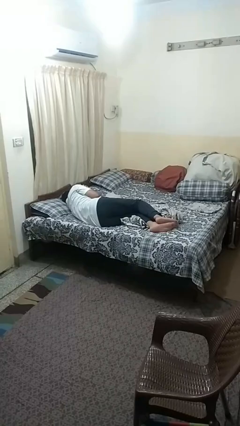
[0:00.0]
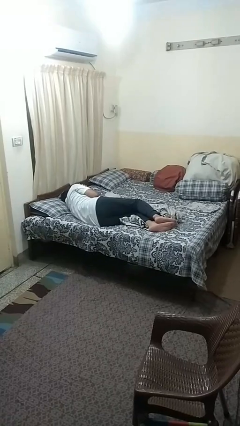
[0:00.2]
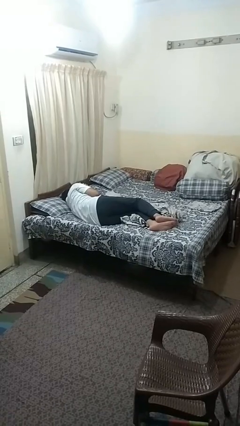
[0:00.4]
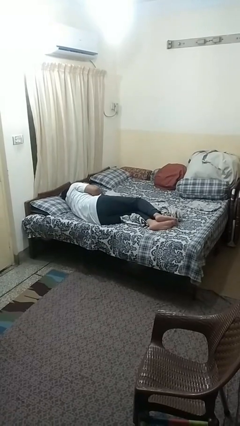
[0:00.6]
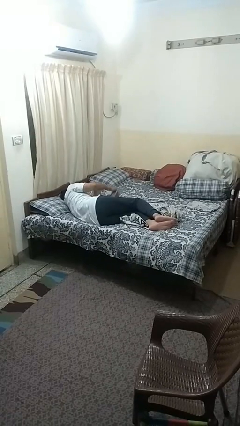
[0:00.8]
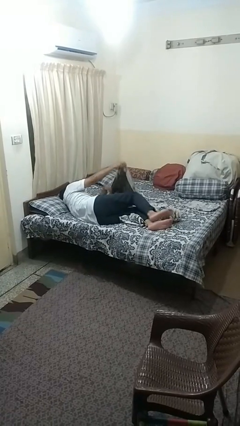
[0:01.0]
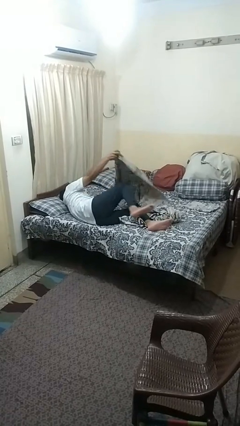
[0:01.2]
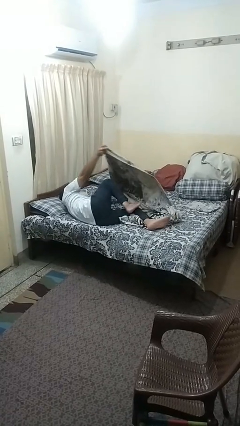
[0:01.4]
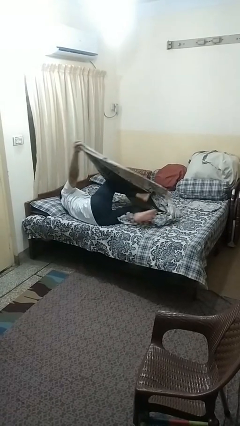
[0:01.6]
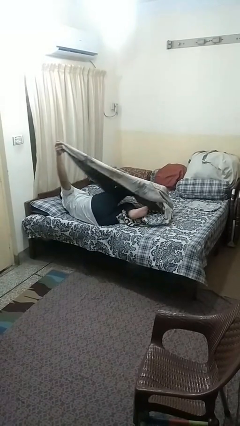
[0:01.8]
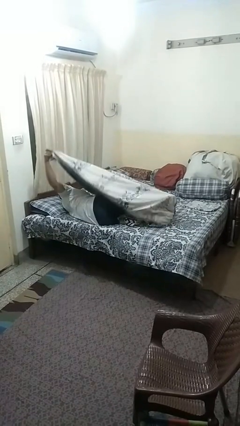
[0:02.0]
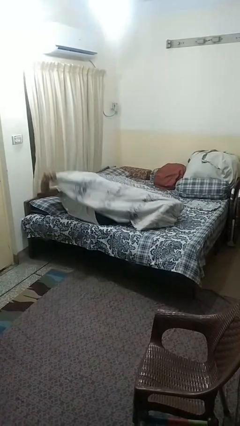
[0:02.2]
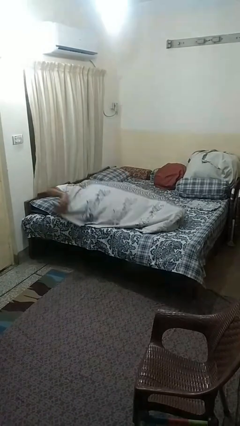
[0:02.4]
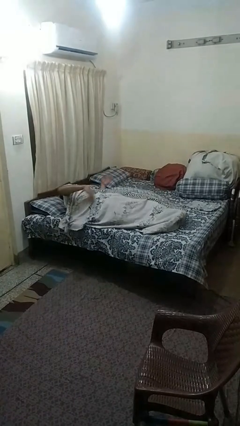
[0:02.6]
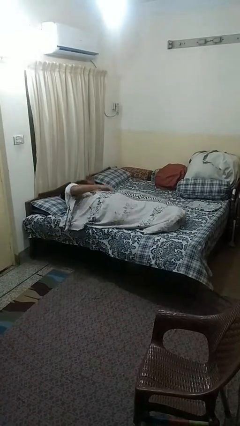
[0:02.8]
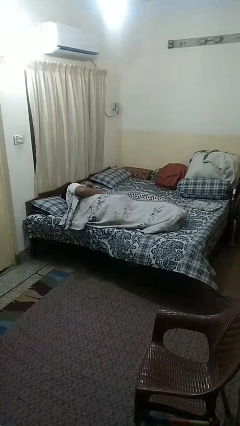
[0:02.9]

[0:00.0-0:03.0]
person covers with bedsheets

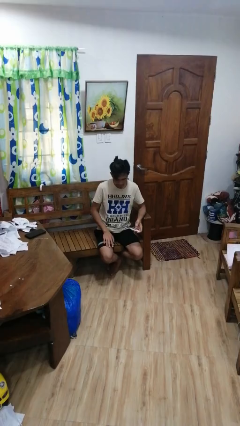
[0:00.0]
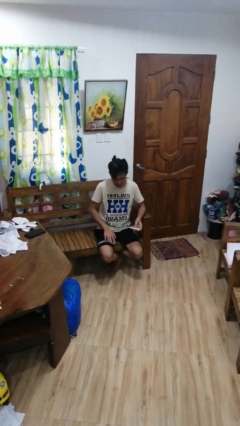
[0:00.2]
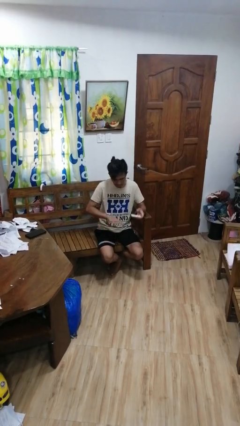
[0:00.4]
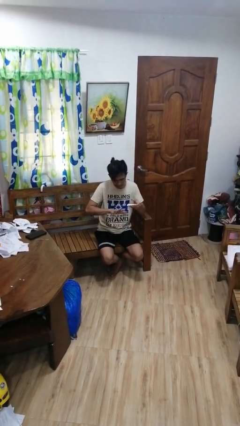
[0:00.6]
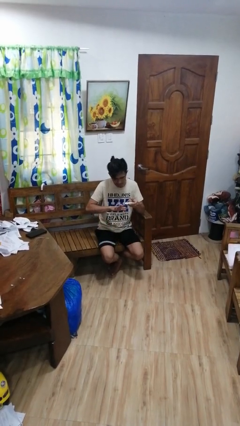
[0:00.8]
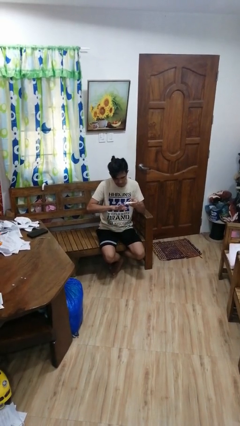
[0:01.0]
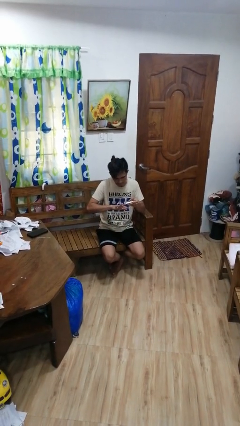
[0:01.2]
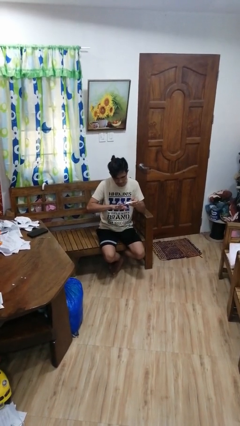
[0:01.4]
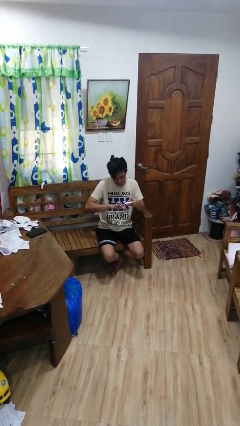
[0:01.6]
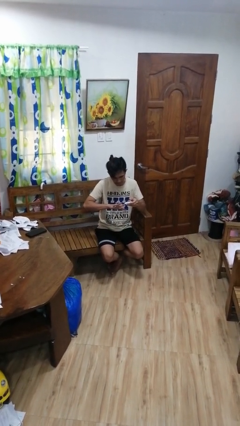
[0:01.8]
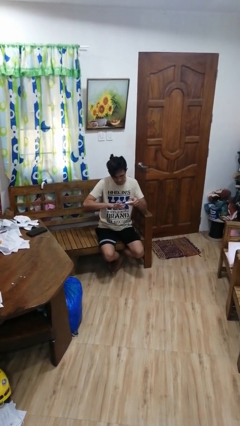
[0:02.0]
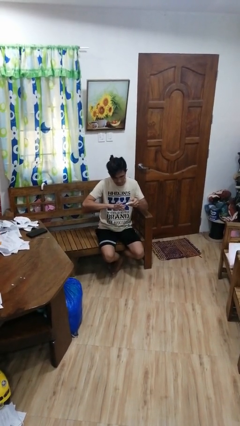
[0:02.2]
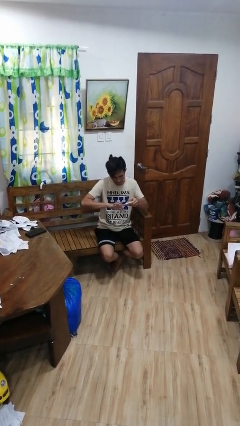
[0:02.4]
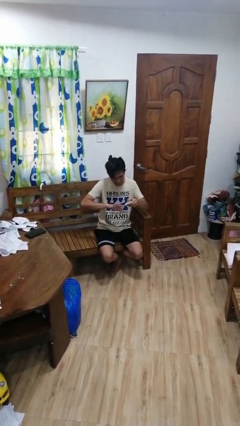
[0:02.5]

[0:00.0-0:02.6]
person clips fingernails

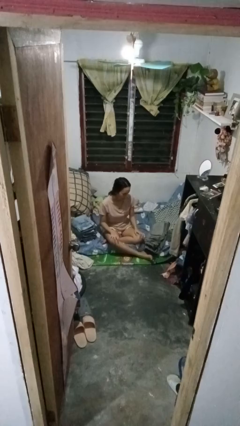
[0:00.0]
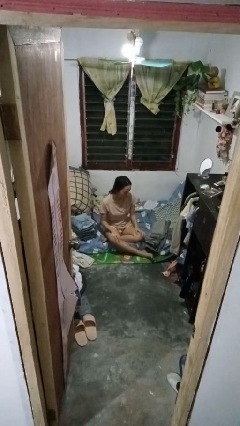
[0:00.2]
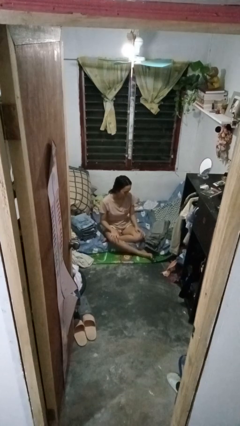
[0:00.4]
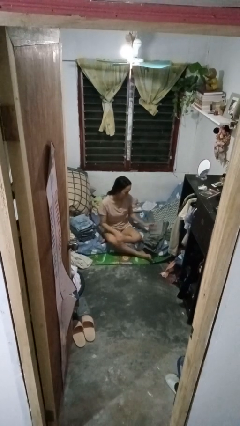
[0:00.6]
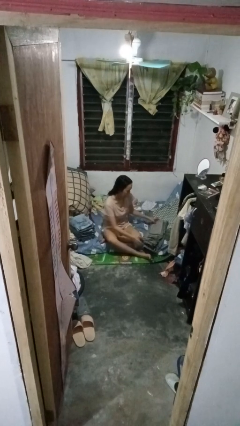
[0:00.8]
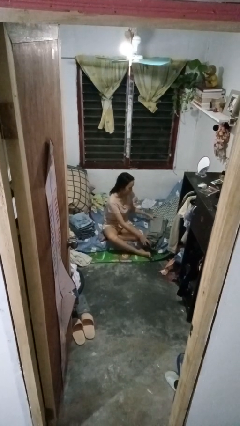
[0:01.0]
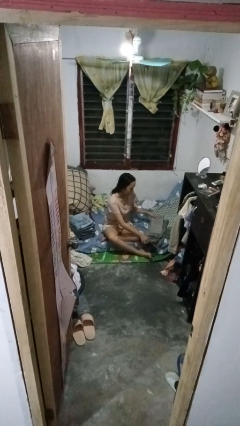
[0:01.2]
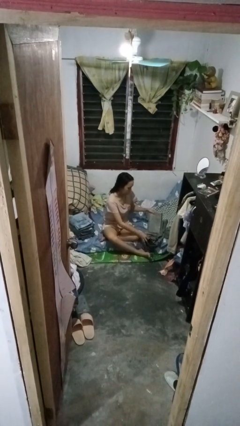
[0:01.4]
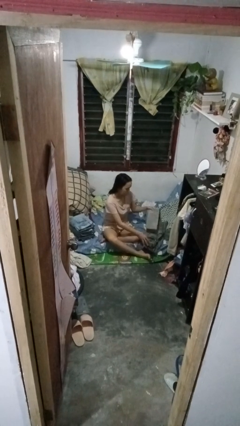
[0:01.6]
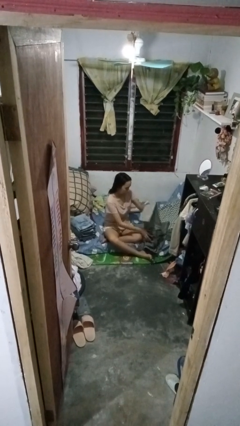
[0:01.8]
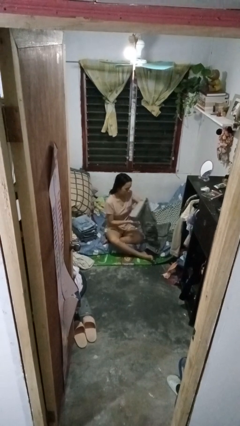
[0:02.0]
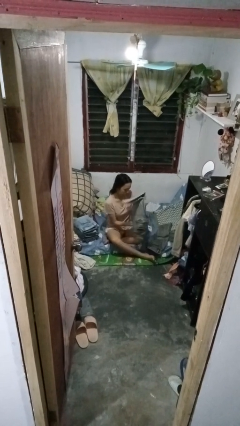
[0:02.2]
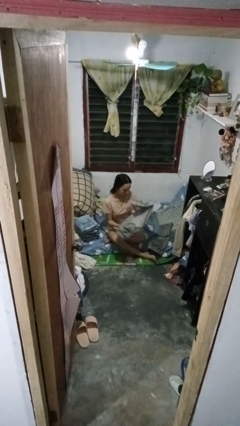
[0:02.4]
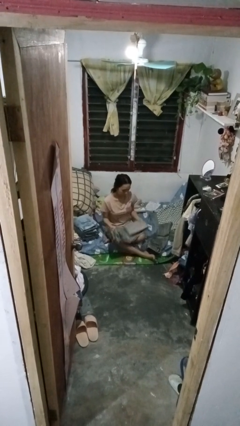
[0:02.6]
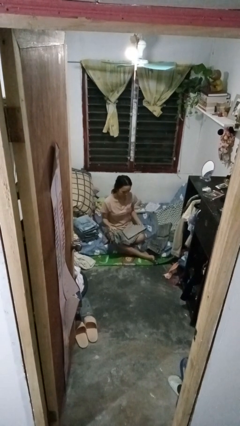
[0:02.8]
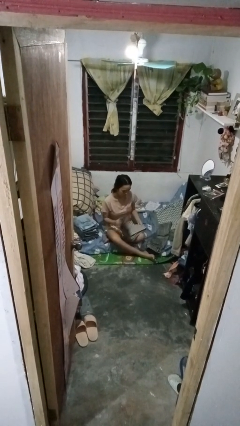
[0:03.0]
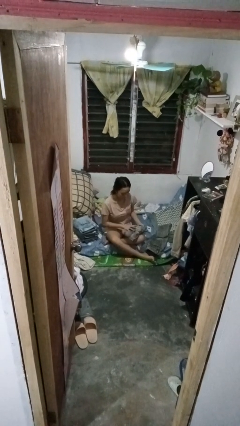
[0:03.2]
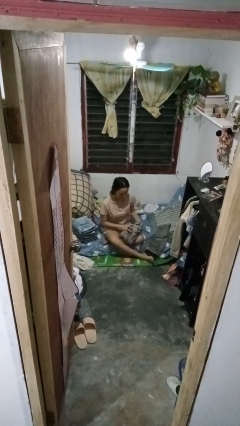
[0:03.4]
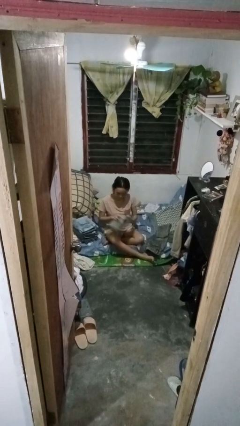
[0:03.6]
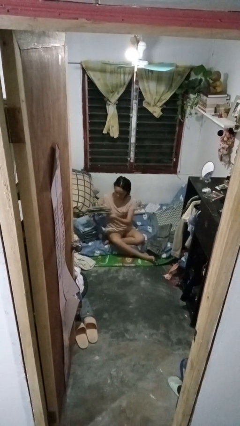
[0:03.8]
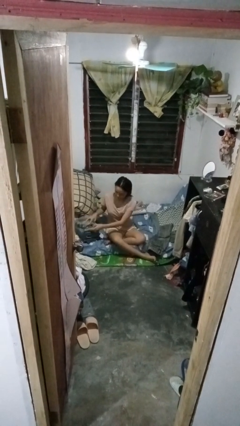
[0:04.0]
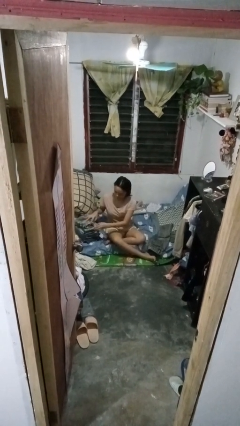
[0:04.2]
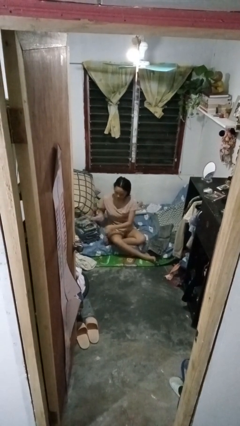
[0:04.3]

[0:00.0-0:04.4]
person folds pants

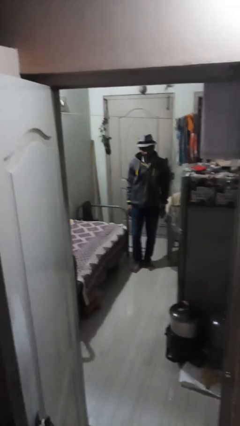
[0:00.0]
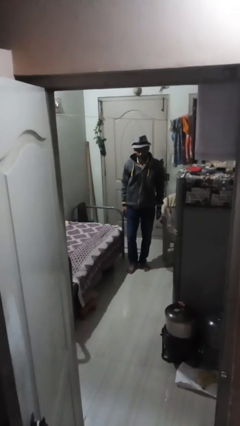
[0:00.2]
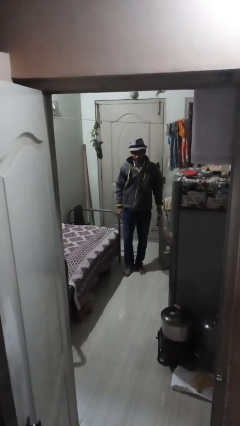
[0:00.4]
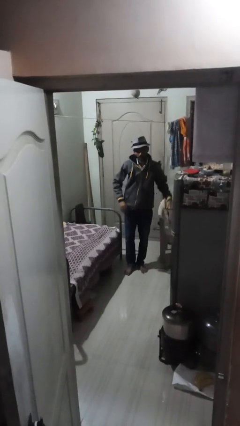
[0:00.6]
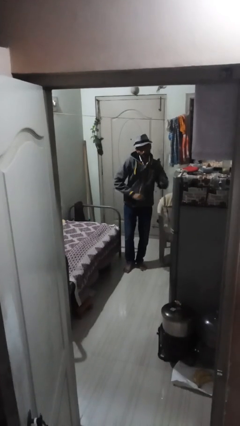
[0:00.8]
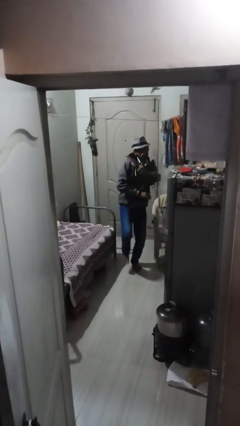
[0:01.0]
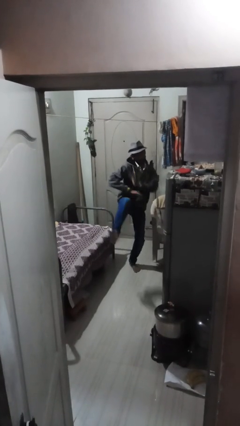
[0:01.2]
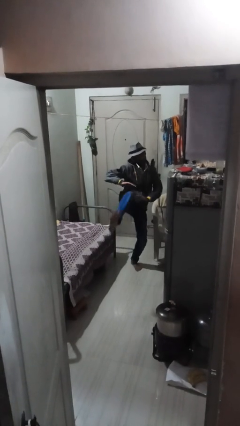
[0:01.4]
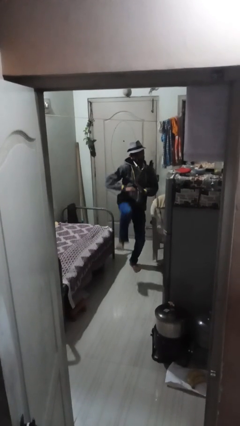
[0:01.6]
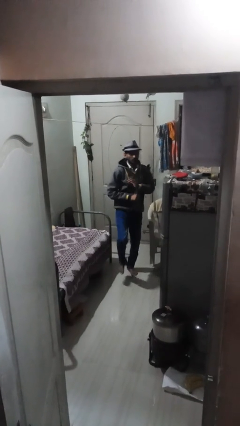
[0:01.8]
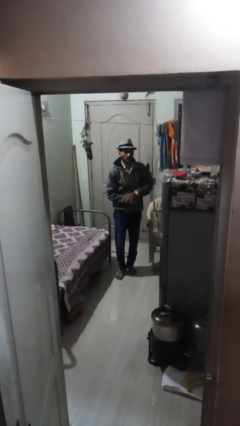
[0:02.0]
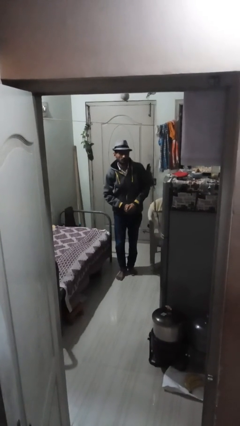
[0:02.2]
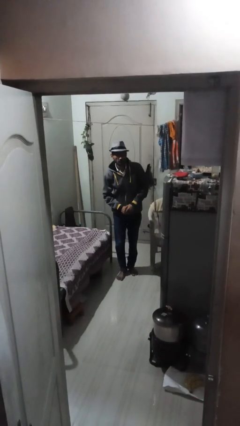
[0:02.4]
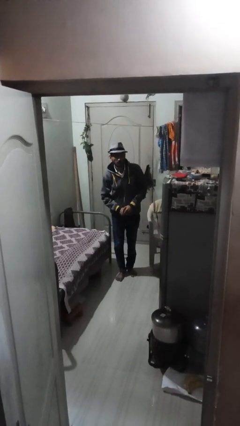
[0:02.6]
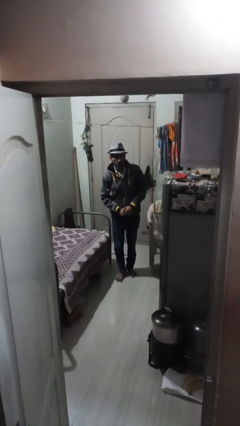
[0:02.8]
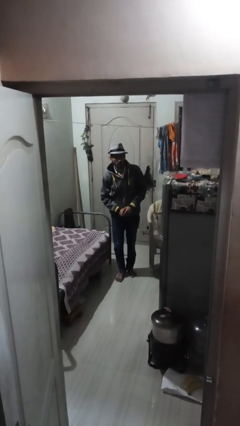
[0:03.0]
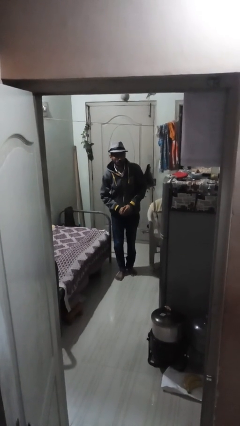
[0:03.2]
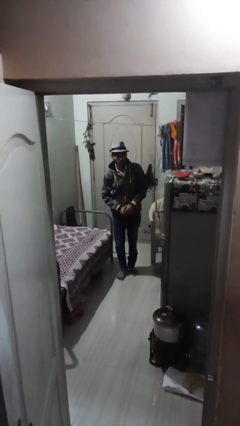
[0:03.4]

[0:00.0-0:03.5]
person karate kicks

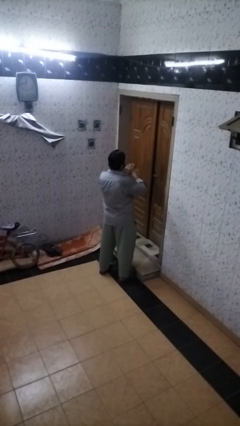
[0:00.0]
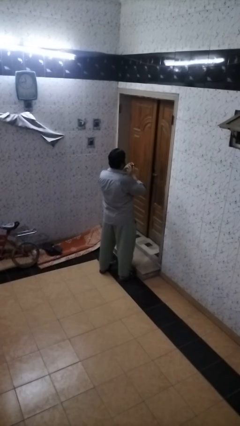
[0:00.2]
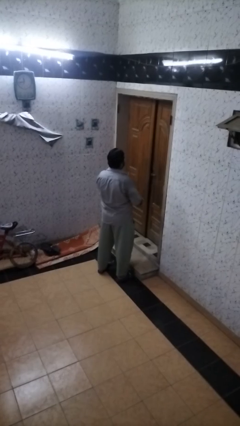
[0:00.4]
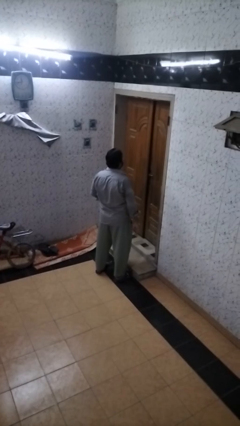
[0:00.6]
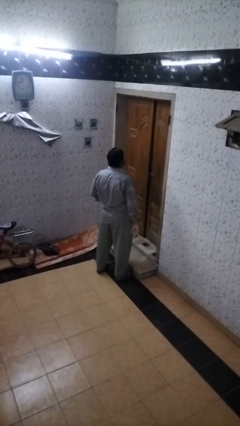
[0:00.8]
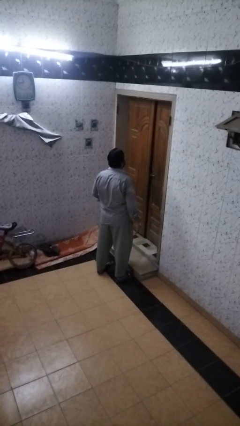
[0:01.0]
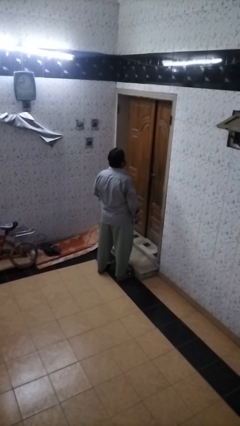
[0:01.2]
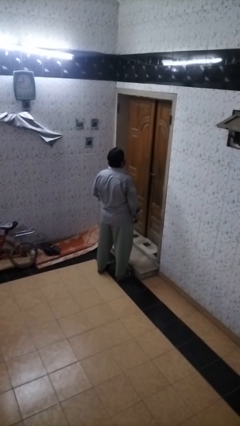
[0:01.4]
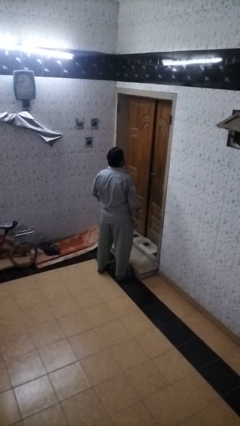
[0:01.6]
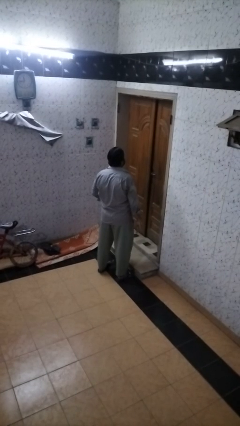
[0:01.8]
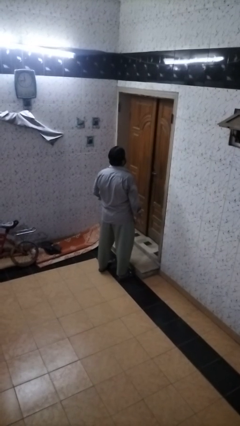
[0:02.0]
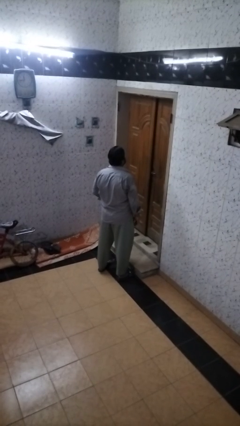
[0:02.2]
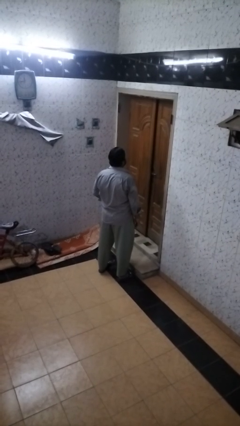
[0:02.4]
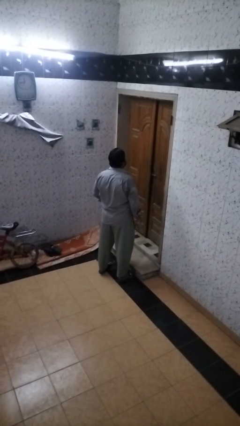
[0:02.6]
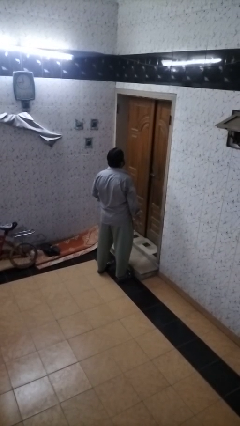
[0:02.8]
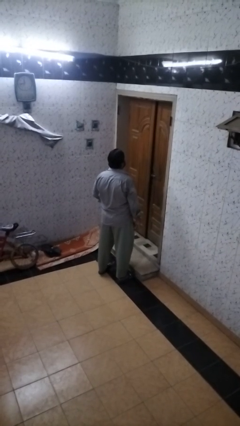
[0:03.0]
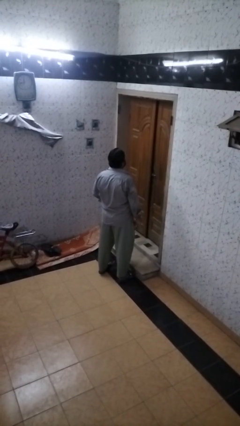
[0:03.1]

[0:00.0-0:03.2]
person takes off ring

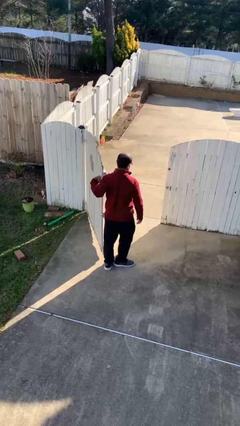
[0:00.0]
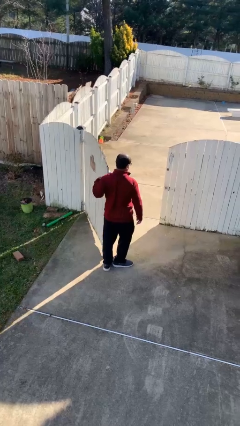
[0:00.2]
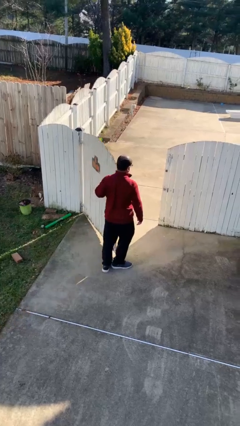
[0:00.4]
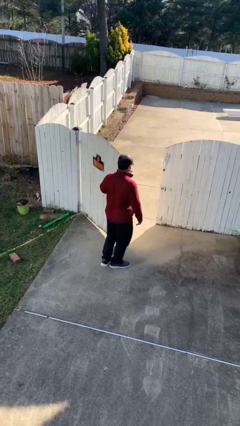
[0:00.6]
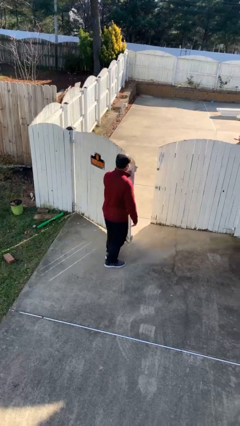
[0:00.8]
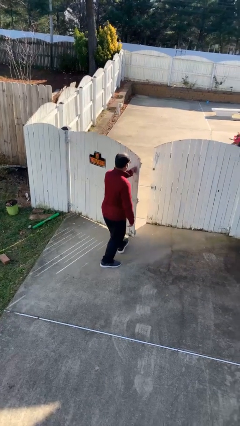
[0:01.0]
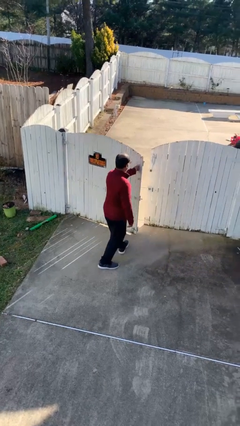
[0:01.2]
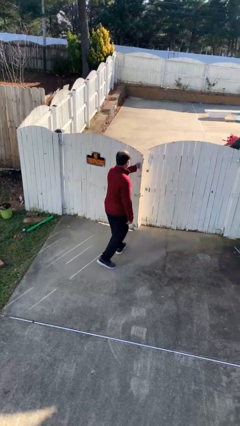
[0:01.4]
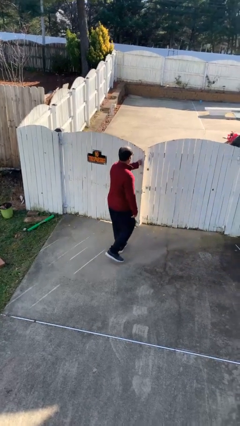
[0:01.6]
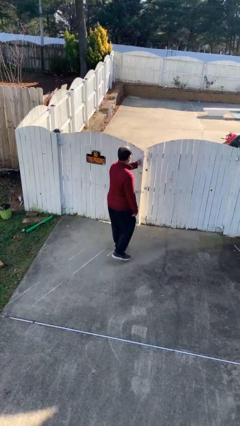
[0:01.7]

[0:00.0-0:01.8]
person closes facility door
